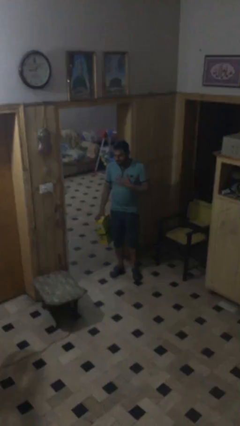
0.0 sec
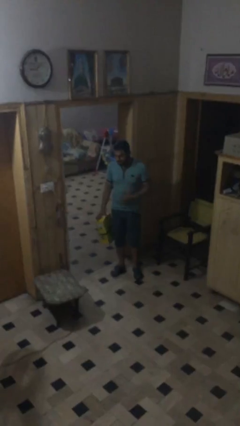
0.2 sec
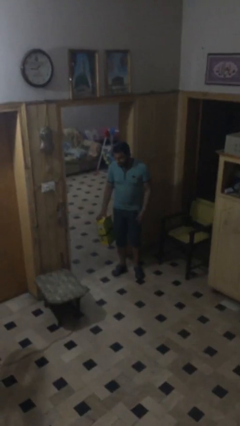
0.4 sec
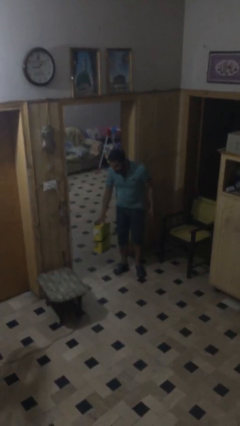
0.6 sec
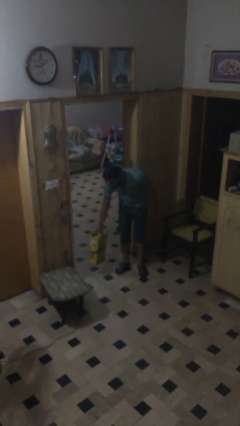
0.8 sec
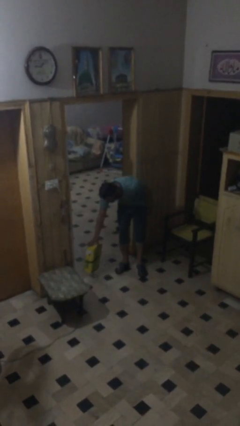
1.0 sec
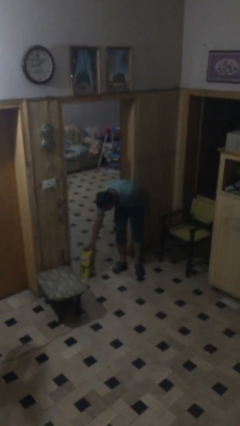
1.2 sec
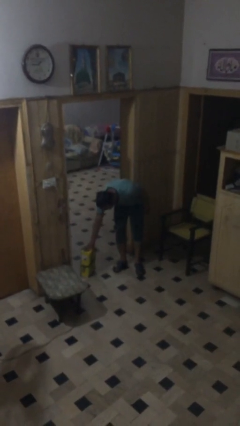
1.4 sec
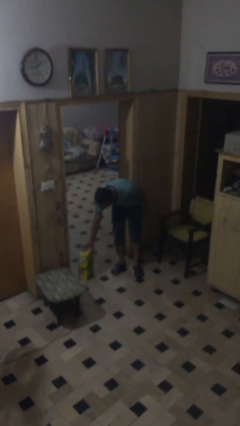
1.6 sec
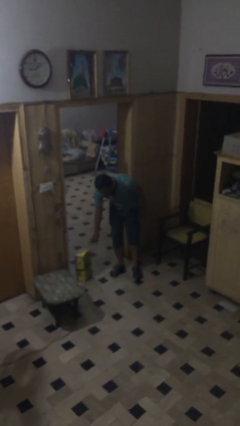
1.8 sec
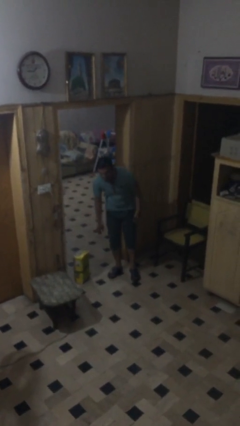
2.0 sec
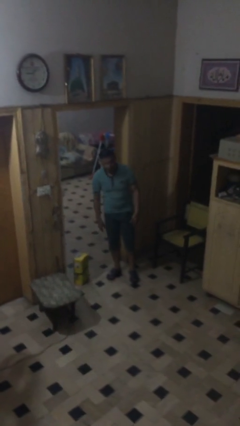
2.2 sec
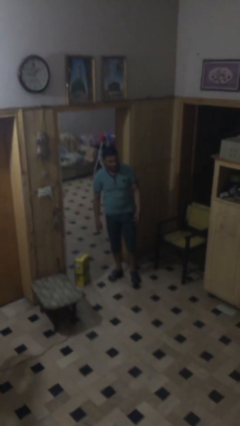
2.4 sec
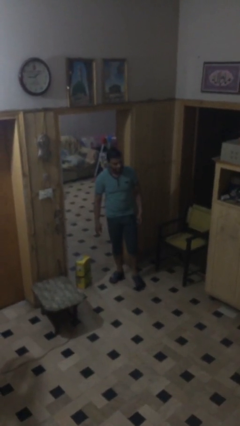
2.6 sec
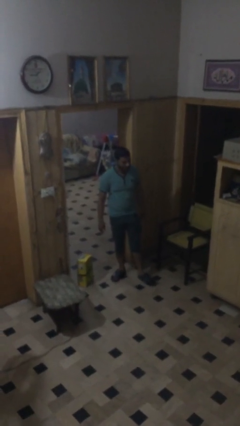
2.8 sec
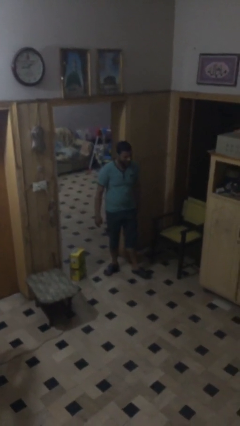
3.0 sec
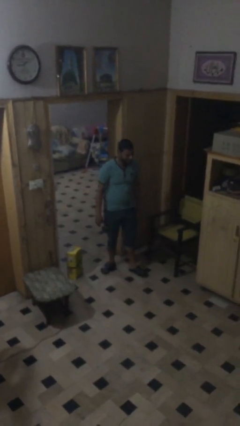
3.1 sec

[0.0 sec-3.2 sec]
person puts down object on floor

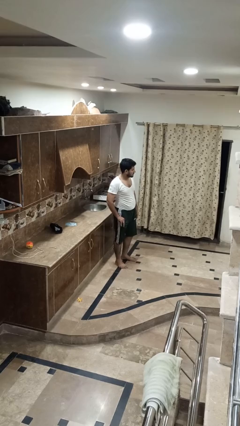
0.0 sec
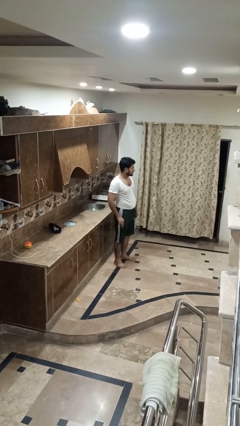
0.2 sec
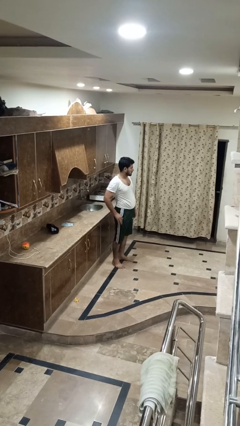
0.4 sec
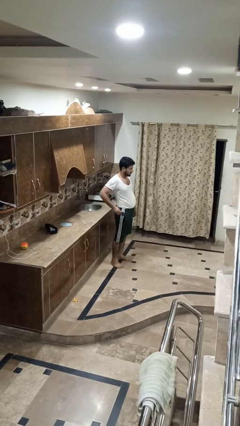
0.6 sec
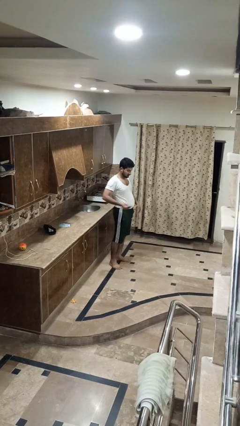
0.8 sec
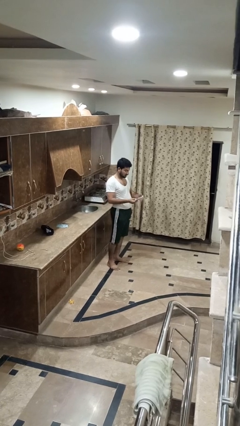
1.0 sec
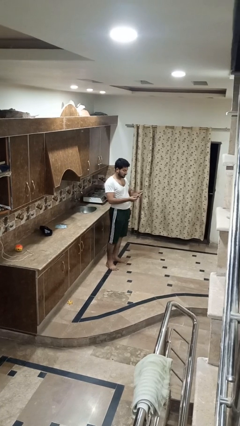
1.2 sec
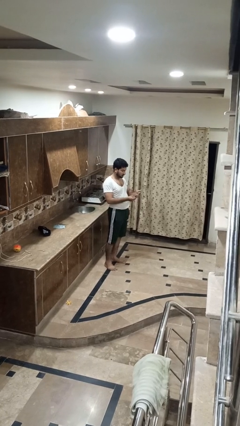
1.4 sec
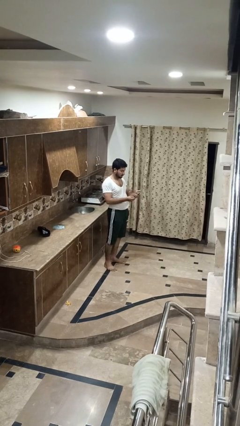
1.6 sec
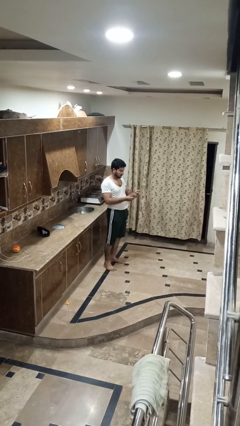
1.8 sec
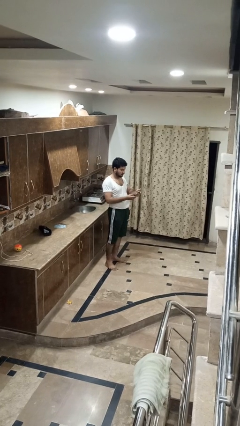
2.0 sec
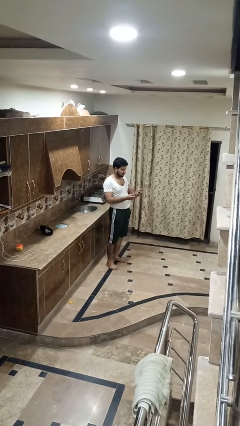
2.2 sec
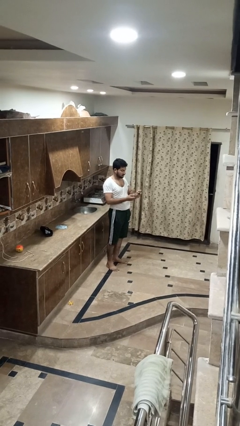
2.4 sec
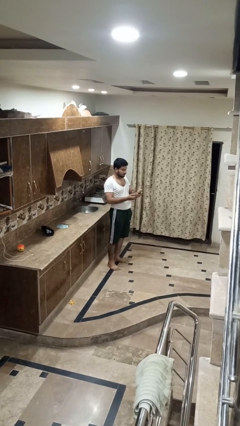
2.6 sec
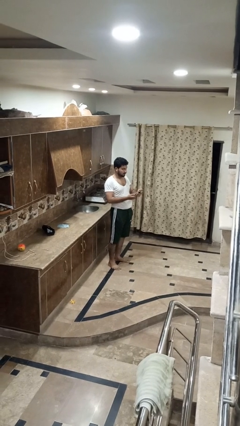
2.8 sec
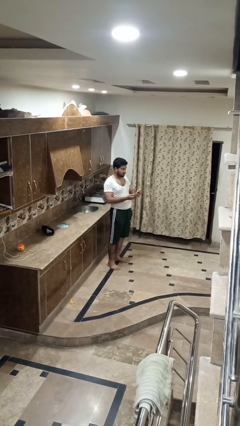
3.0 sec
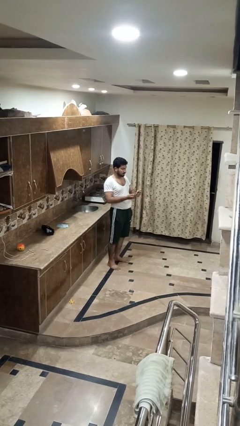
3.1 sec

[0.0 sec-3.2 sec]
person takes phone from pocket

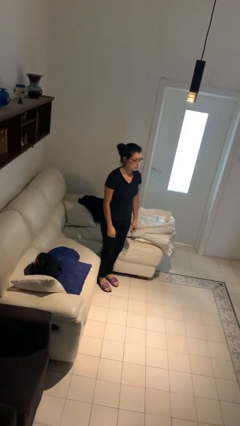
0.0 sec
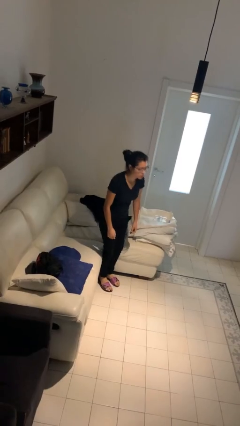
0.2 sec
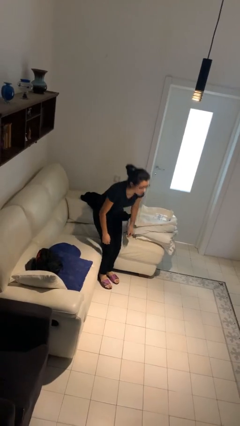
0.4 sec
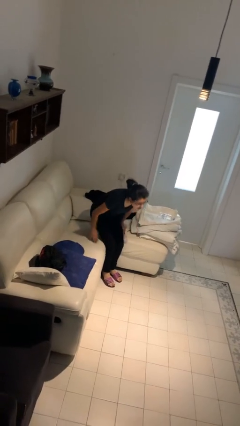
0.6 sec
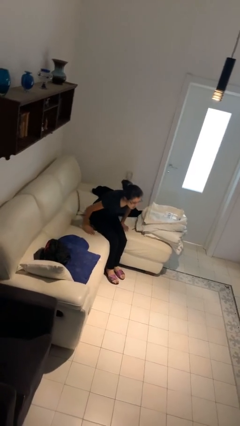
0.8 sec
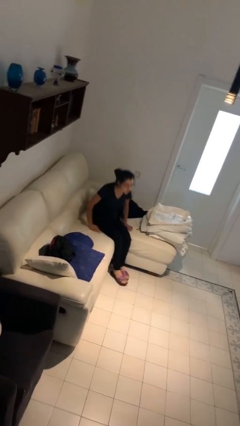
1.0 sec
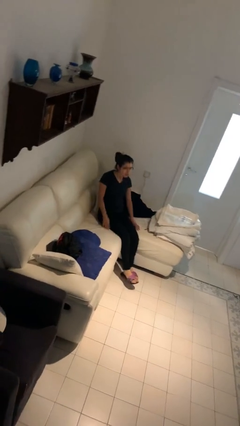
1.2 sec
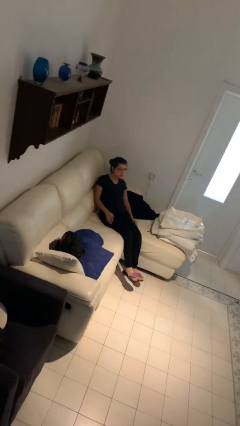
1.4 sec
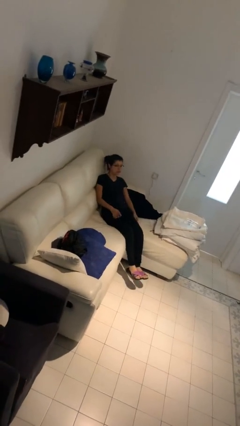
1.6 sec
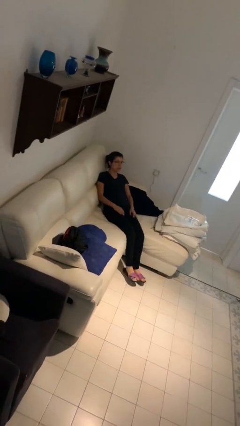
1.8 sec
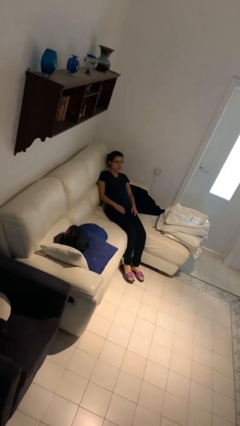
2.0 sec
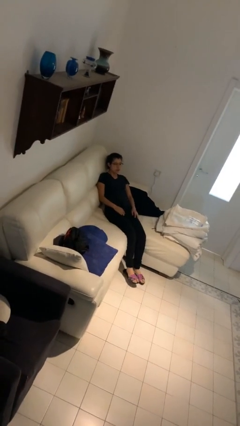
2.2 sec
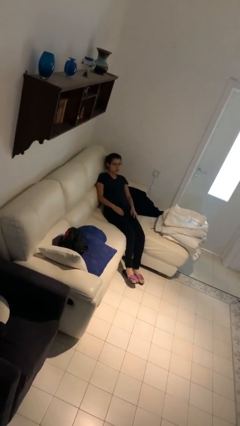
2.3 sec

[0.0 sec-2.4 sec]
person lies down on couch

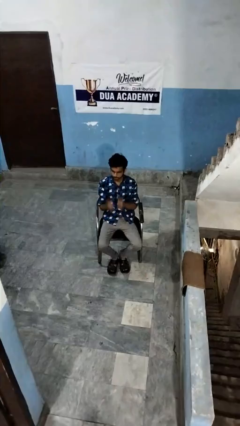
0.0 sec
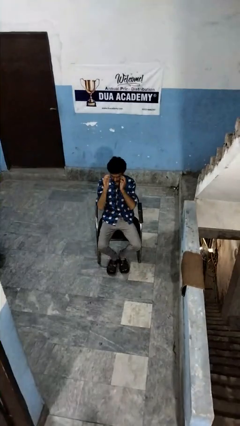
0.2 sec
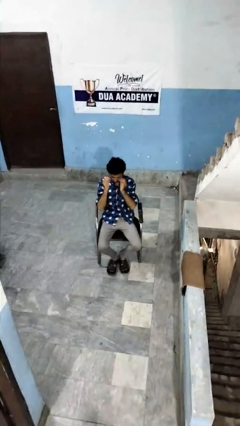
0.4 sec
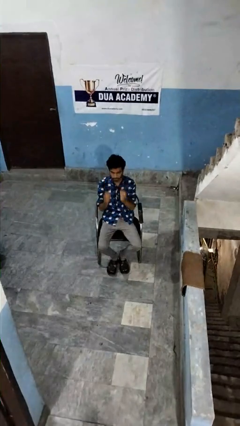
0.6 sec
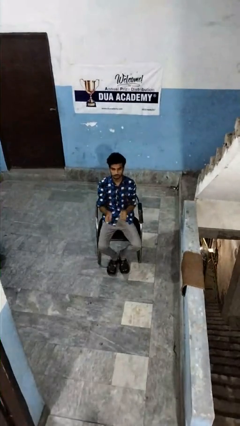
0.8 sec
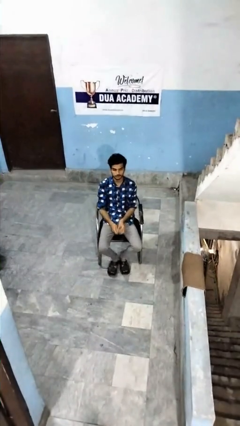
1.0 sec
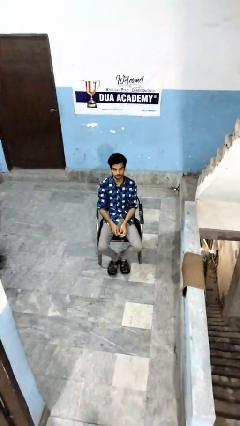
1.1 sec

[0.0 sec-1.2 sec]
person takes off glasses

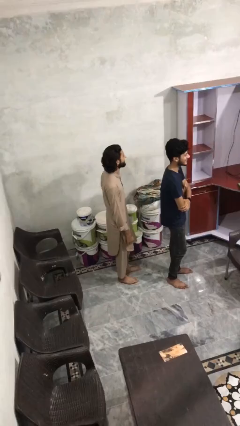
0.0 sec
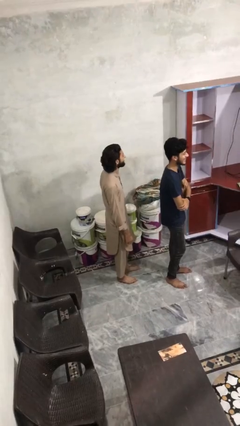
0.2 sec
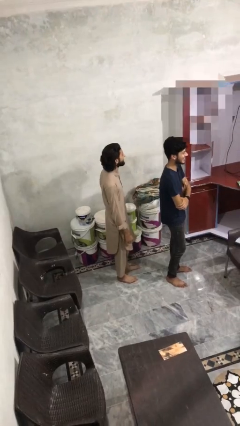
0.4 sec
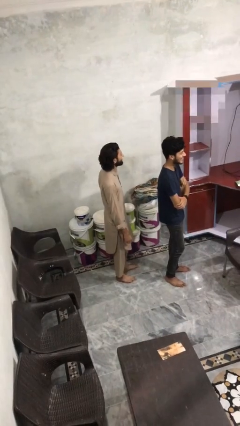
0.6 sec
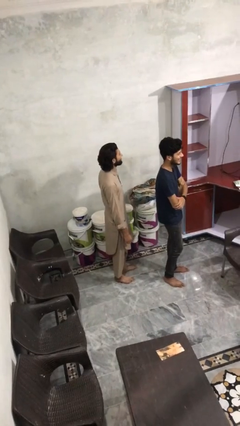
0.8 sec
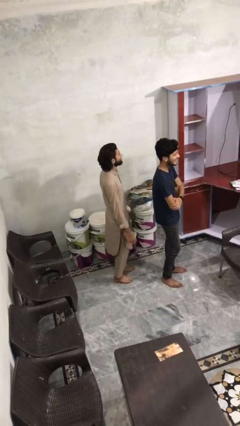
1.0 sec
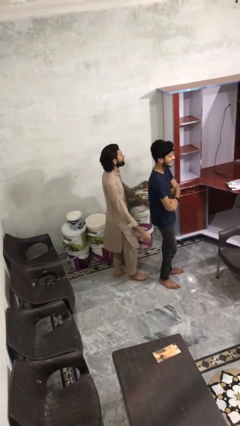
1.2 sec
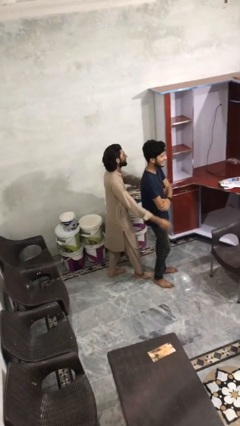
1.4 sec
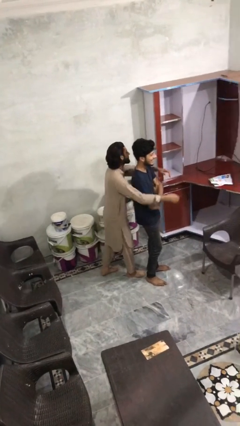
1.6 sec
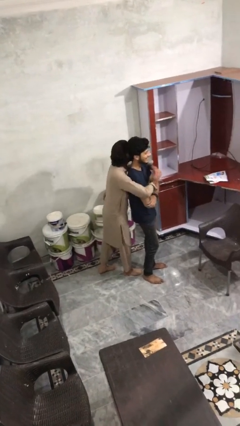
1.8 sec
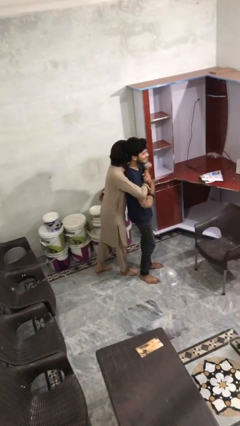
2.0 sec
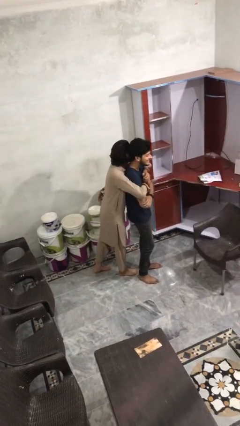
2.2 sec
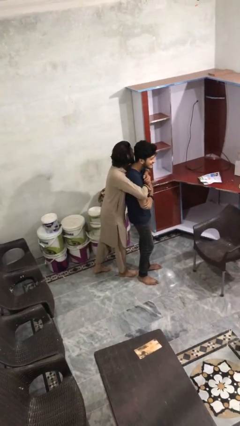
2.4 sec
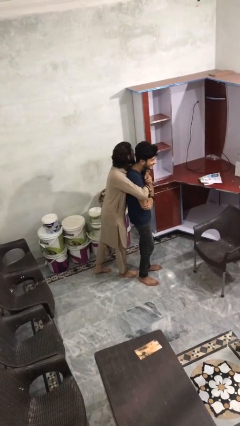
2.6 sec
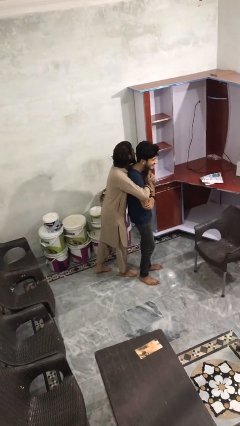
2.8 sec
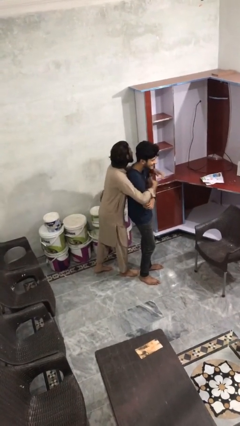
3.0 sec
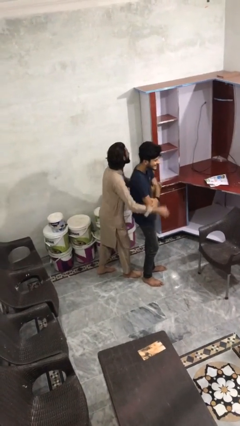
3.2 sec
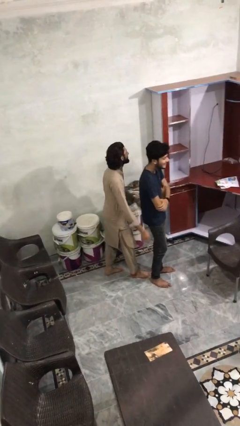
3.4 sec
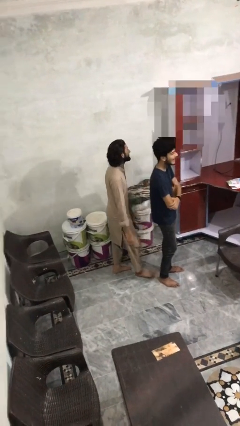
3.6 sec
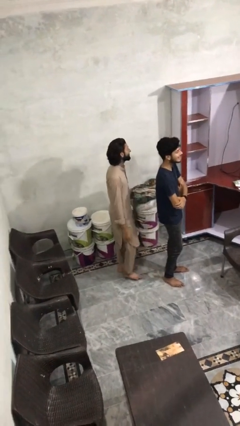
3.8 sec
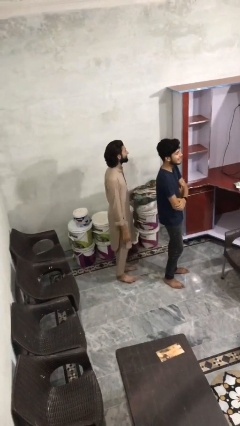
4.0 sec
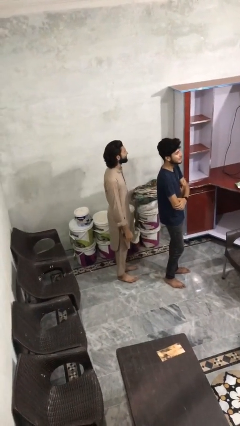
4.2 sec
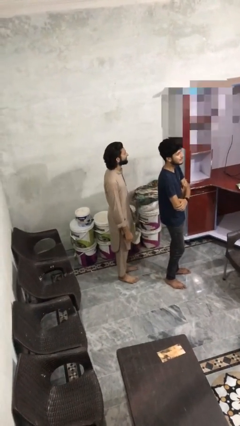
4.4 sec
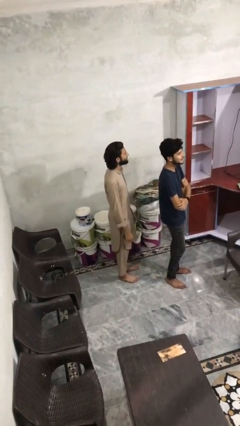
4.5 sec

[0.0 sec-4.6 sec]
person hugs person from behind

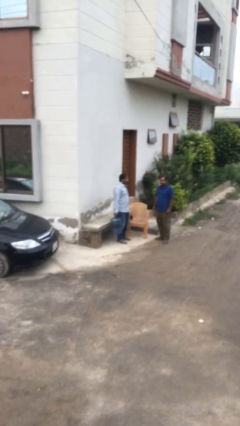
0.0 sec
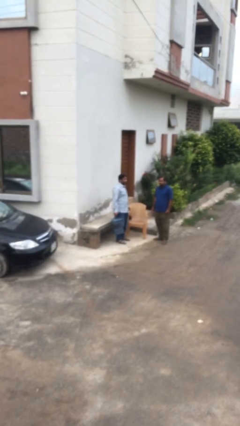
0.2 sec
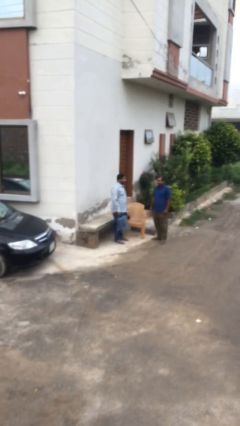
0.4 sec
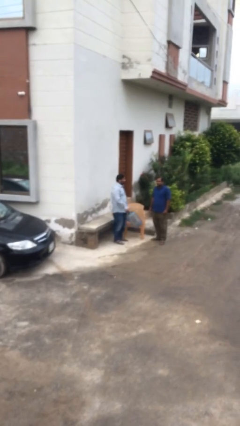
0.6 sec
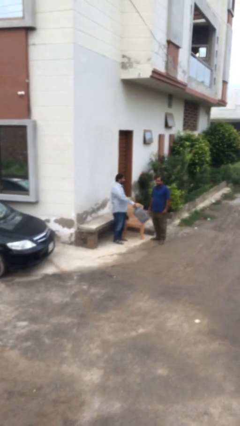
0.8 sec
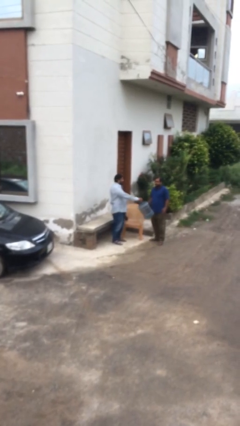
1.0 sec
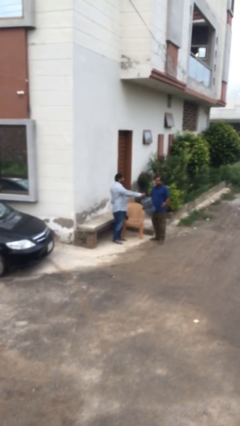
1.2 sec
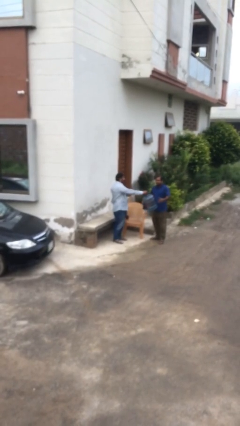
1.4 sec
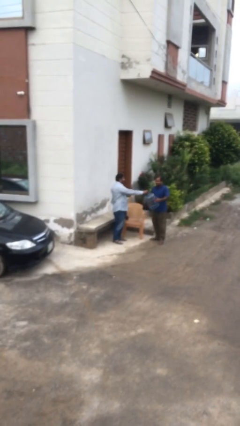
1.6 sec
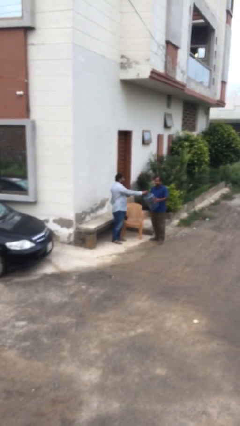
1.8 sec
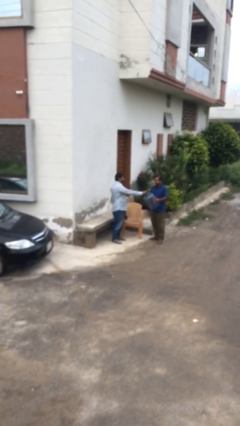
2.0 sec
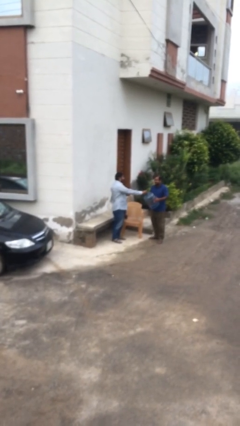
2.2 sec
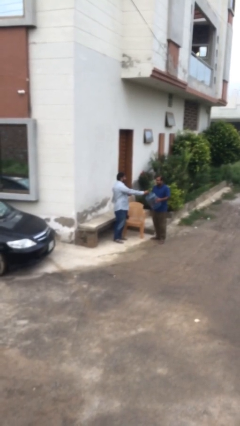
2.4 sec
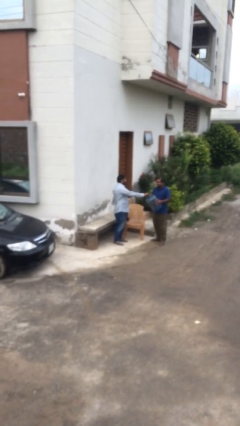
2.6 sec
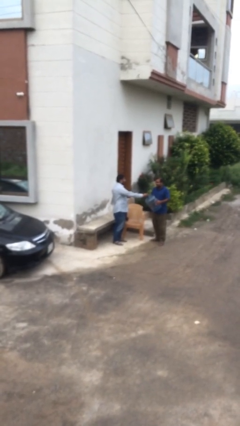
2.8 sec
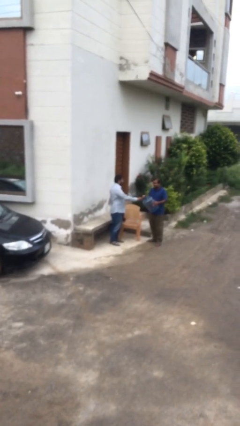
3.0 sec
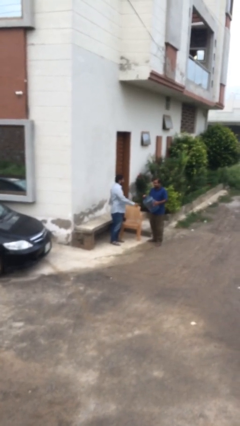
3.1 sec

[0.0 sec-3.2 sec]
person transfers object to person
